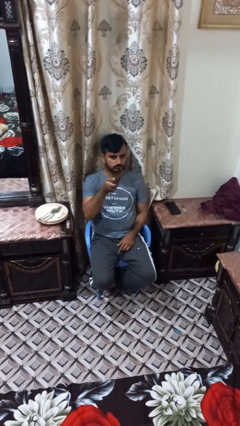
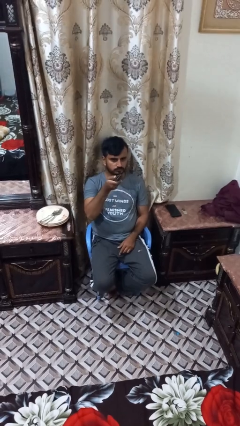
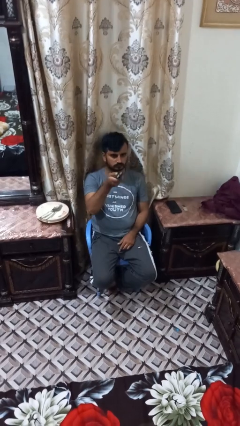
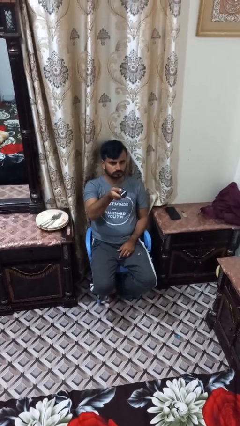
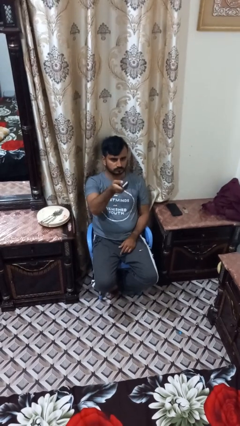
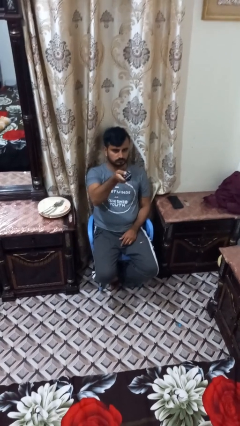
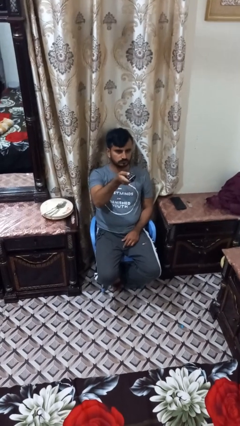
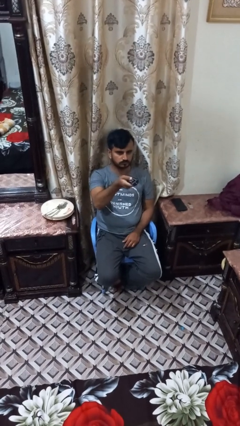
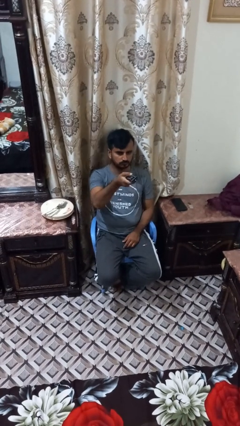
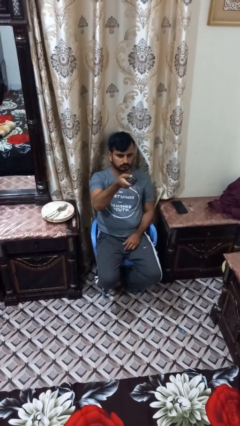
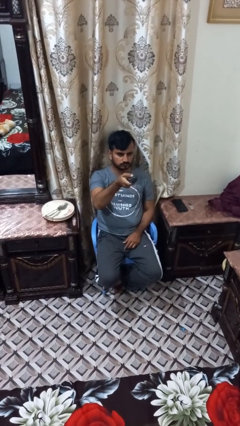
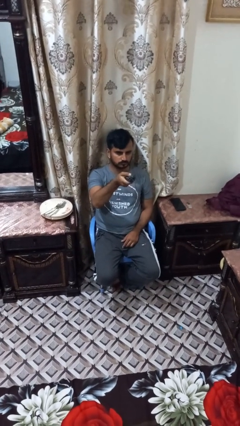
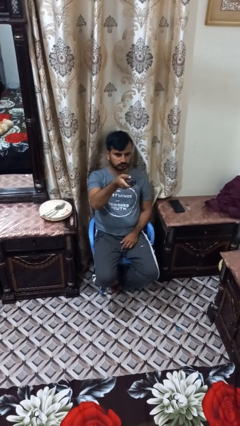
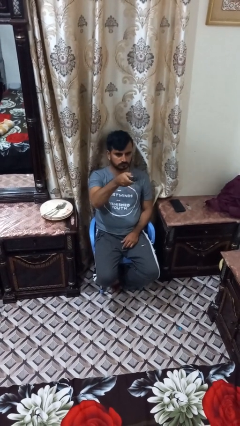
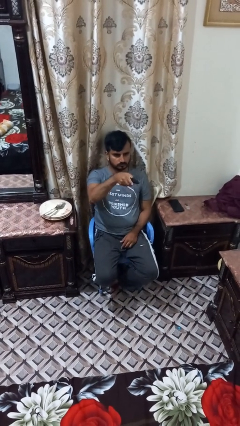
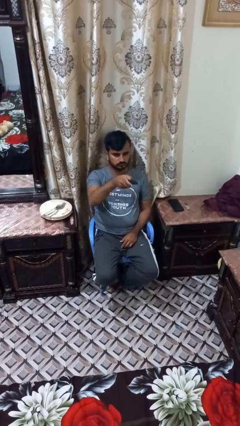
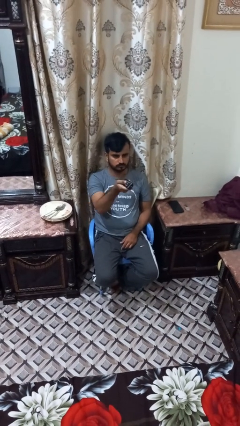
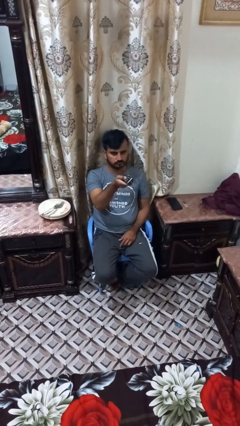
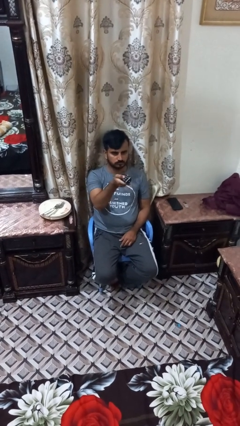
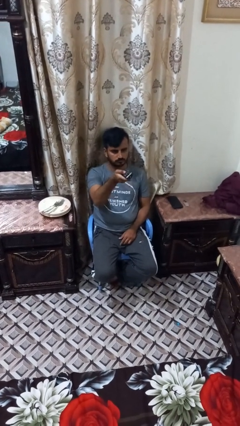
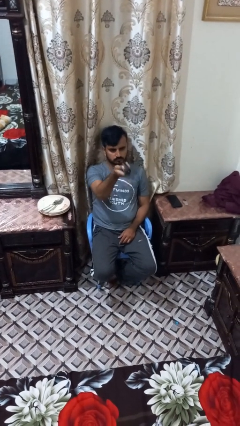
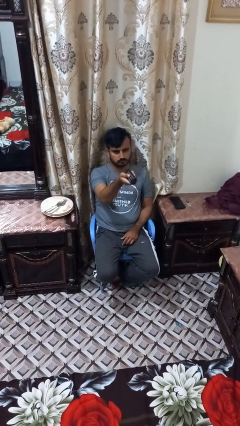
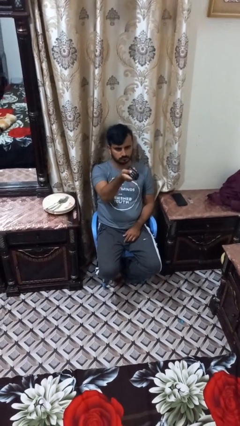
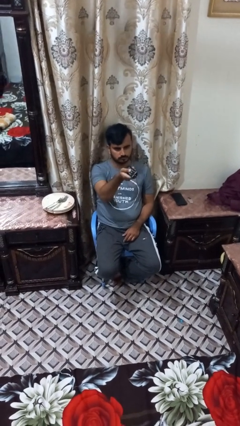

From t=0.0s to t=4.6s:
person uses television remote

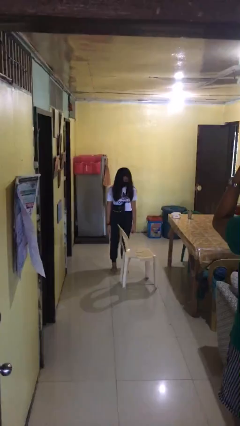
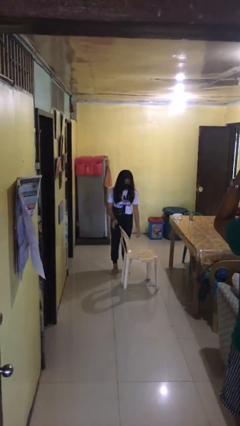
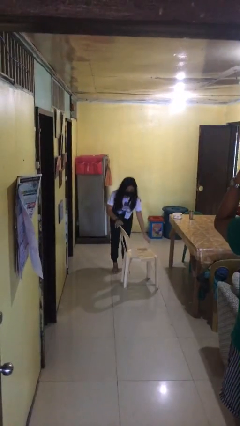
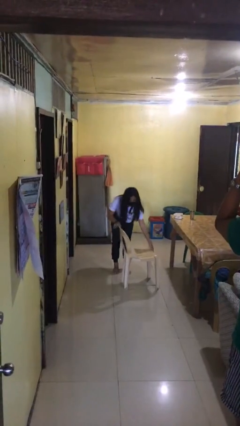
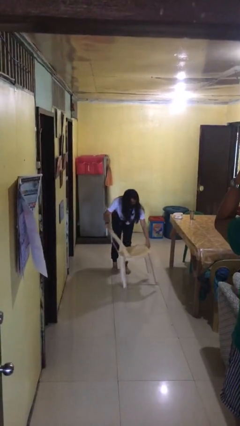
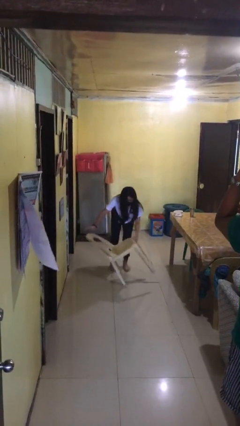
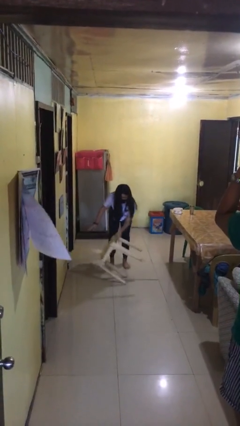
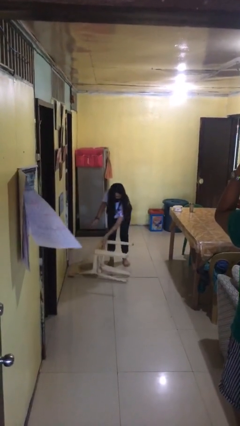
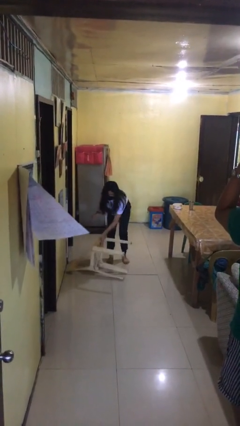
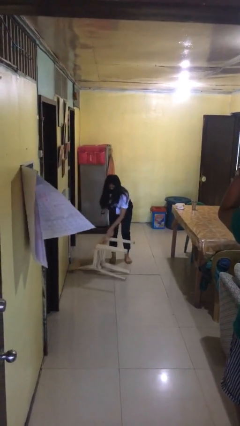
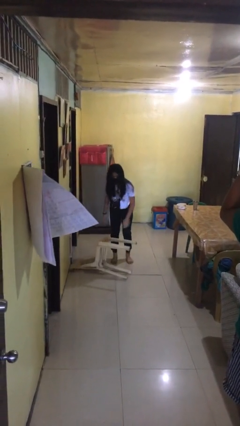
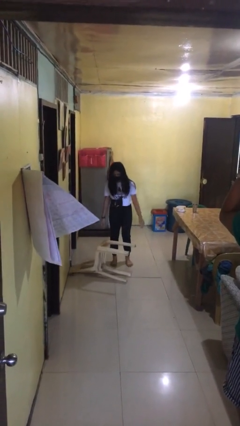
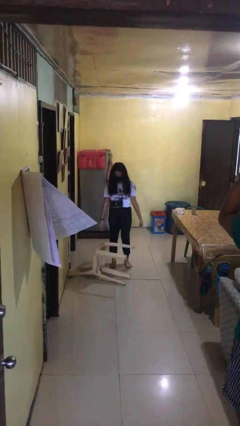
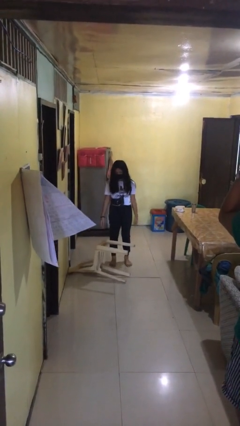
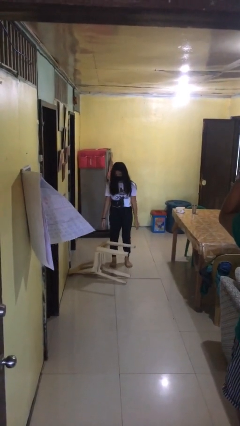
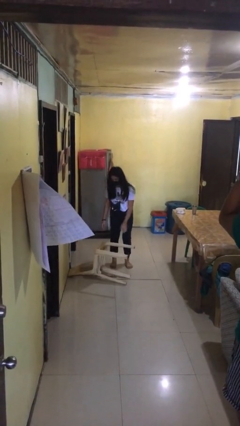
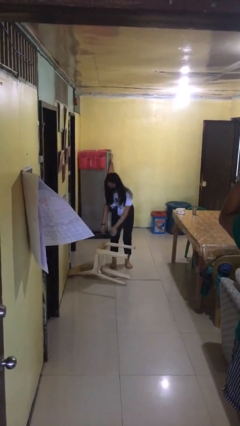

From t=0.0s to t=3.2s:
person knocks over furniture

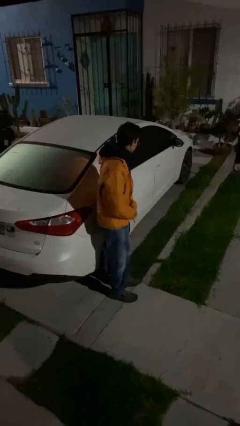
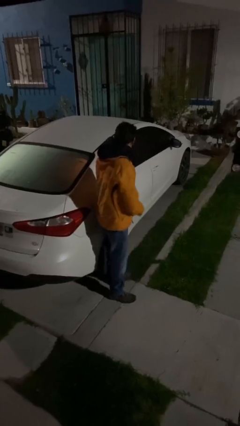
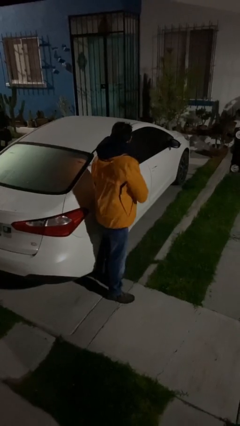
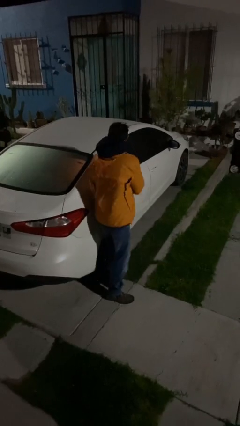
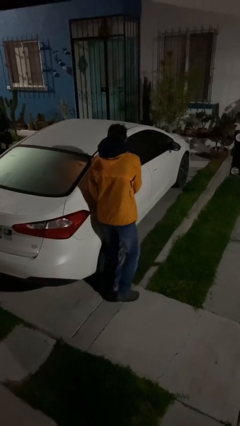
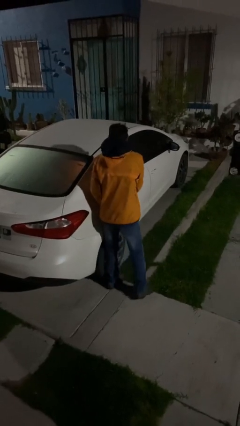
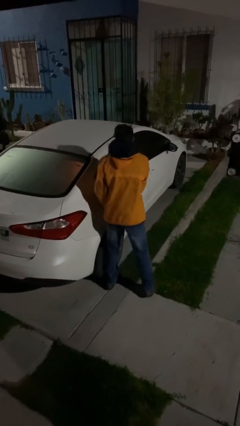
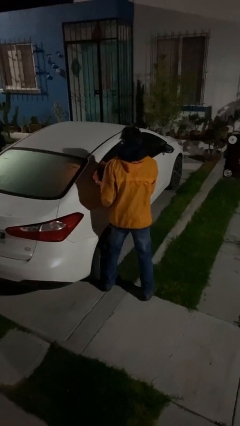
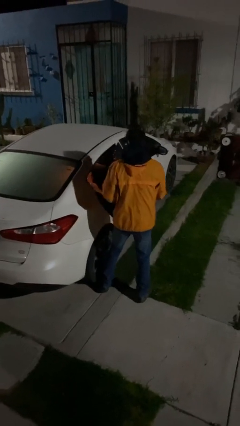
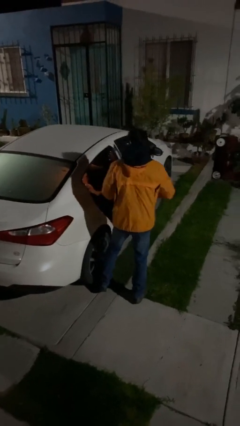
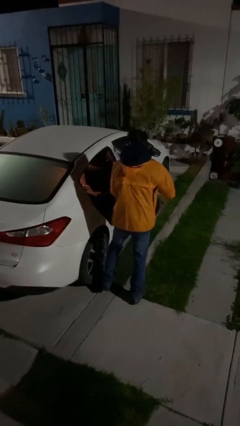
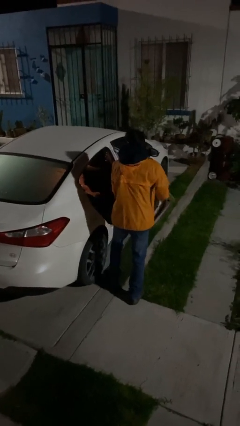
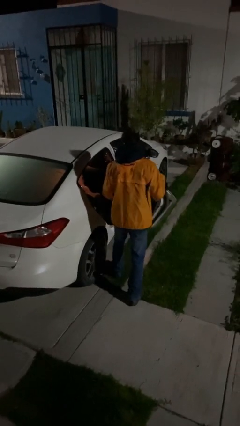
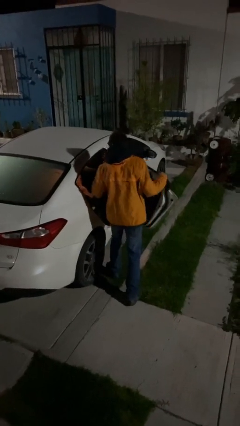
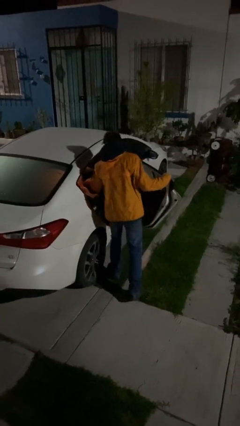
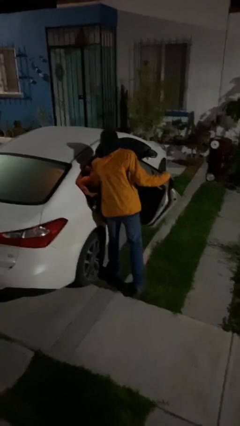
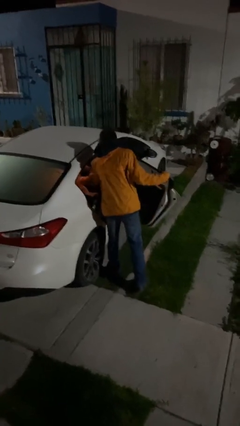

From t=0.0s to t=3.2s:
person opens car door

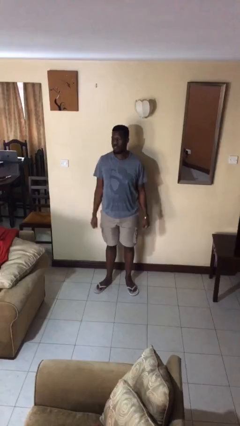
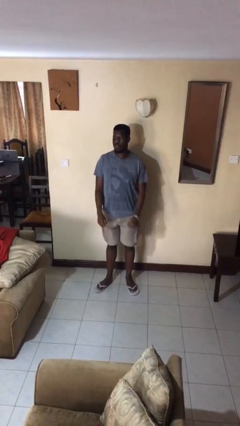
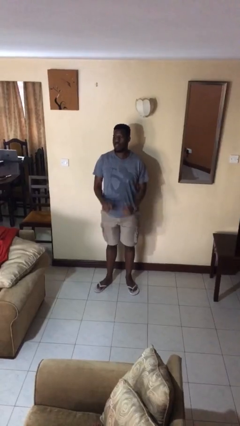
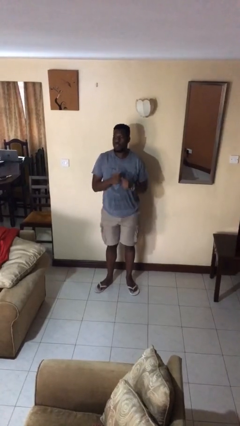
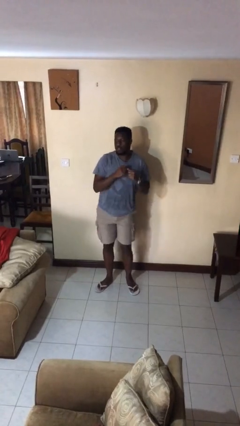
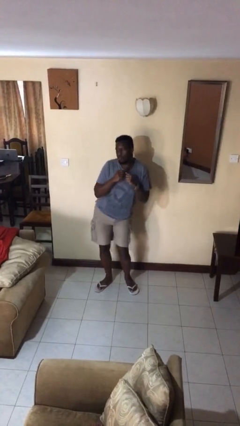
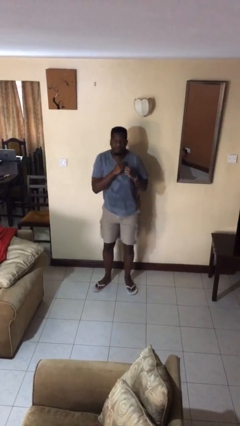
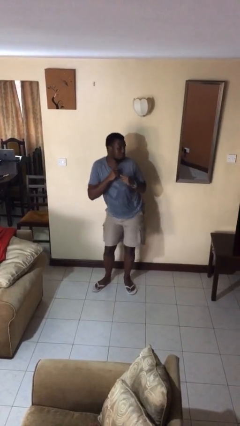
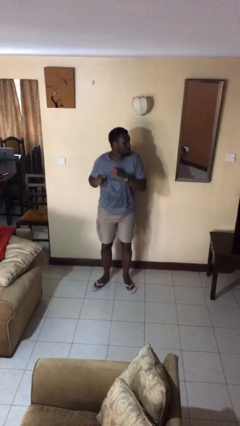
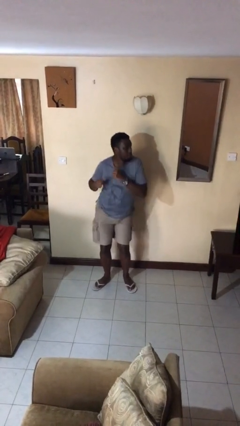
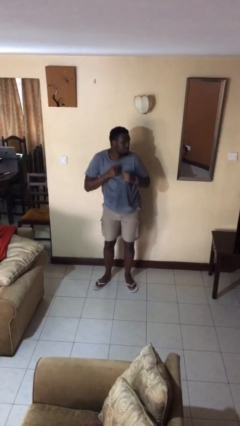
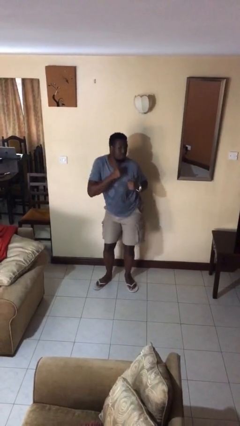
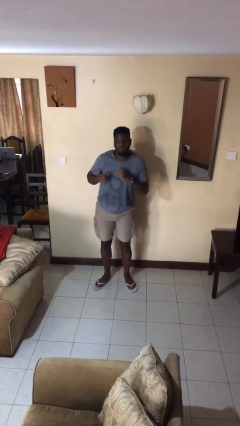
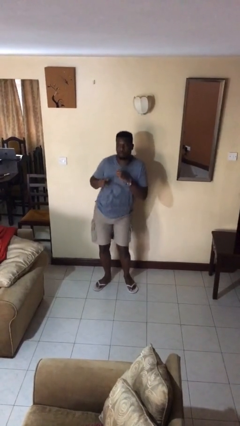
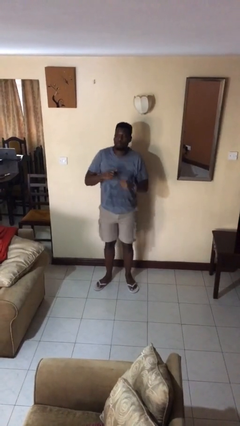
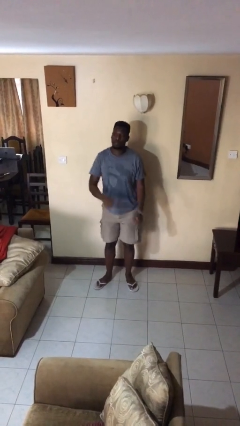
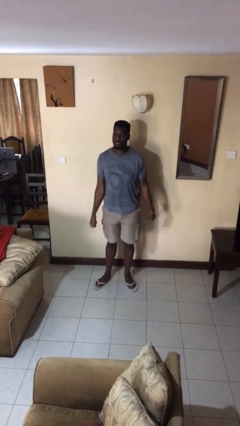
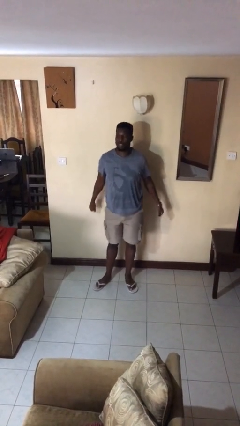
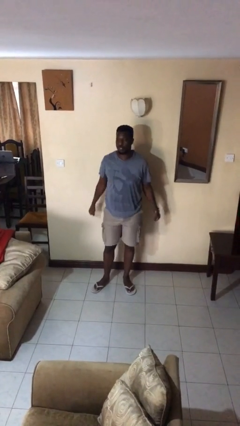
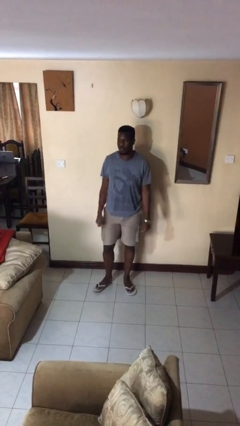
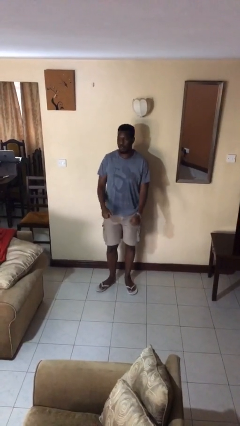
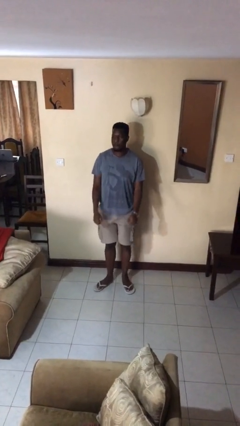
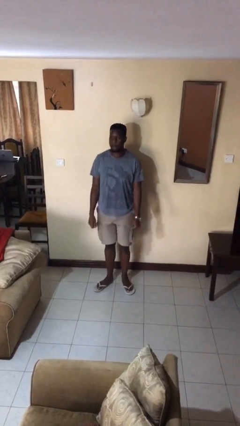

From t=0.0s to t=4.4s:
person wiggles hips

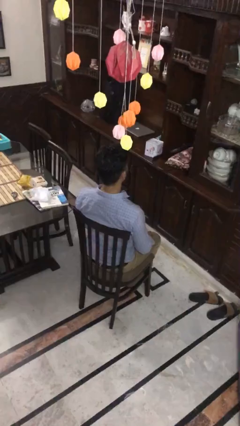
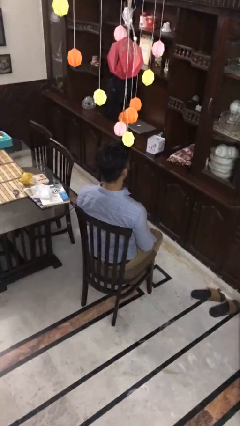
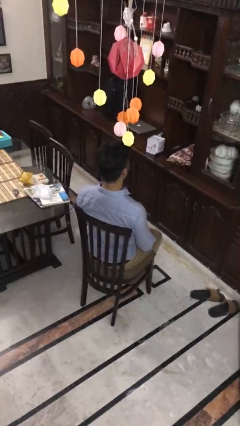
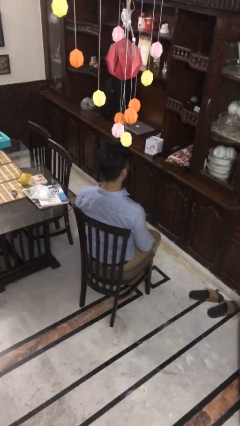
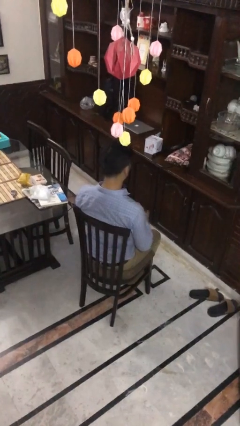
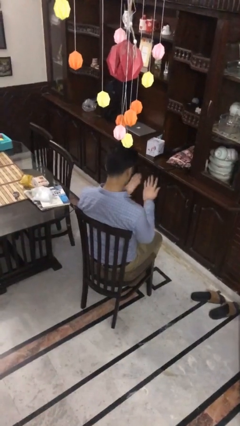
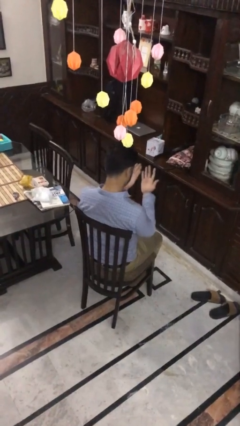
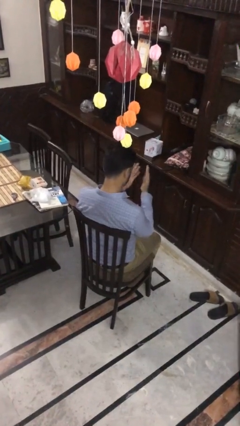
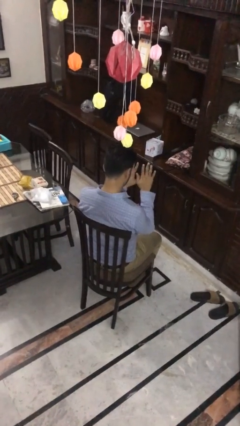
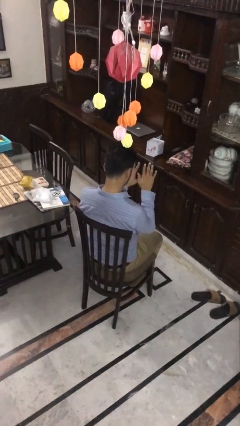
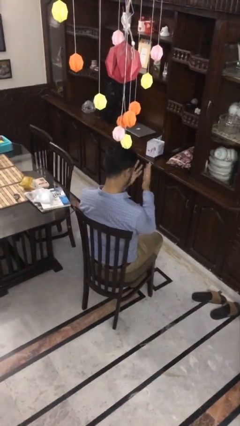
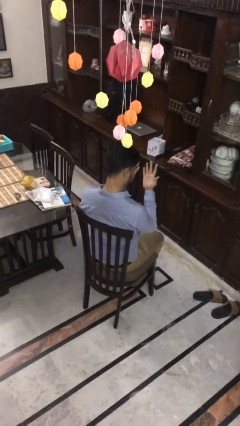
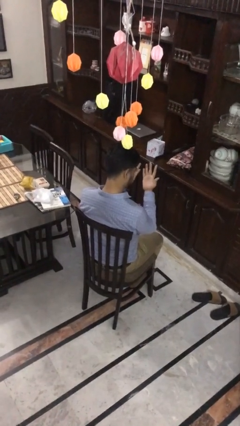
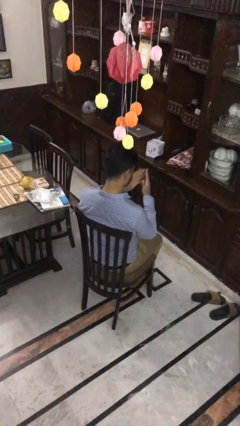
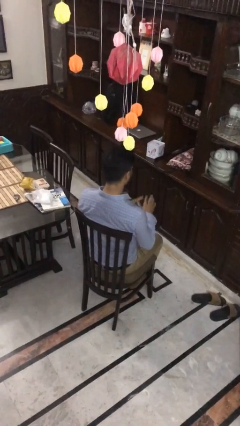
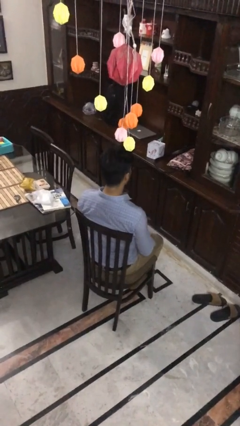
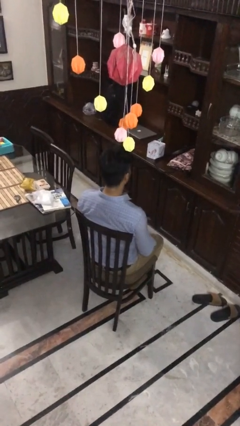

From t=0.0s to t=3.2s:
person looks at hands in lap
